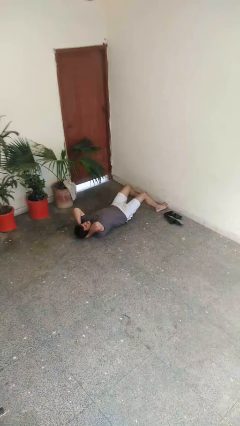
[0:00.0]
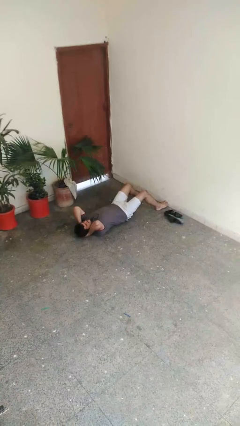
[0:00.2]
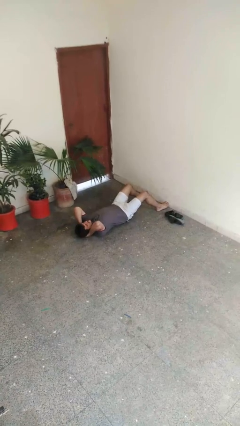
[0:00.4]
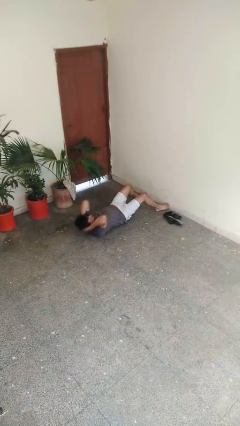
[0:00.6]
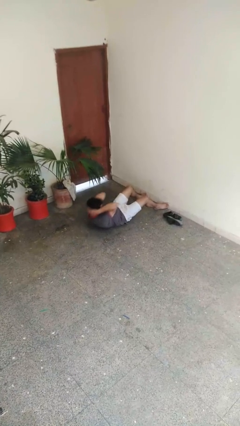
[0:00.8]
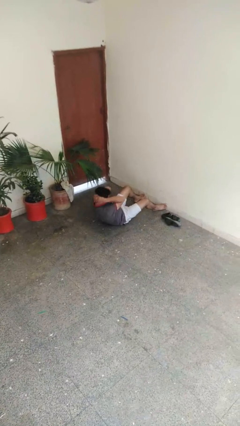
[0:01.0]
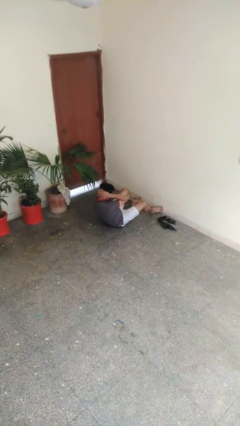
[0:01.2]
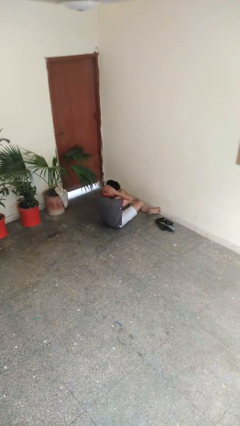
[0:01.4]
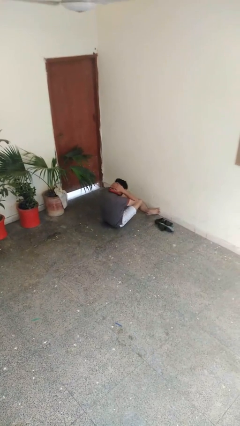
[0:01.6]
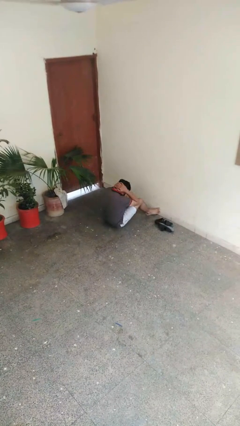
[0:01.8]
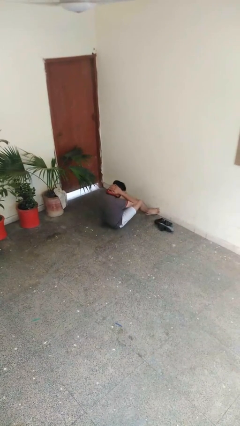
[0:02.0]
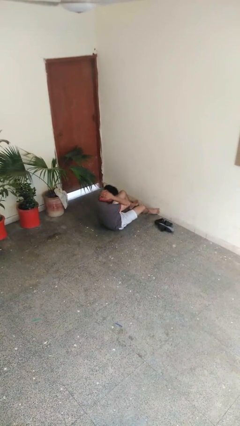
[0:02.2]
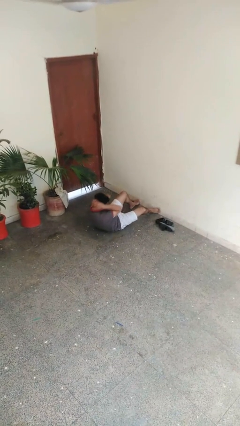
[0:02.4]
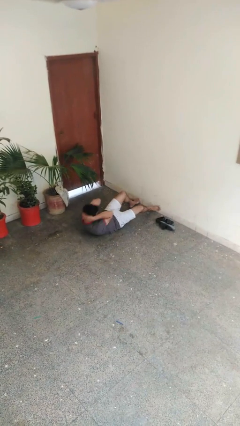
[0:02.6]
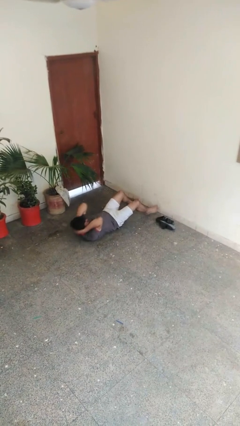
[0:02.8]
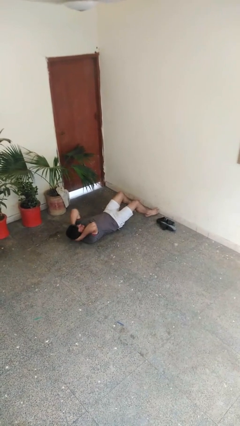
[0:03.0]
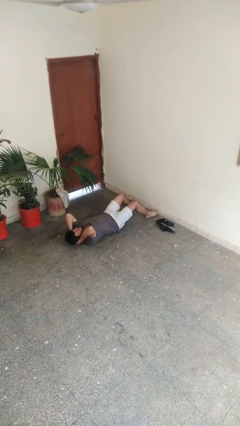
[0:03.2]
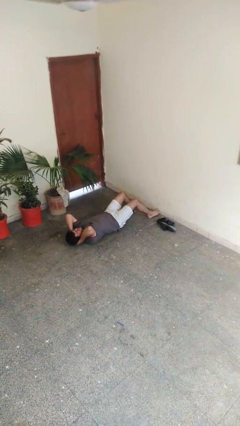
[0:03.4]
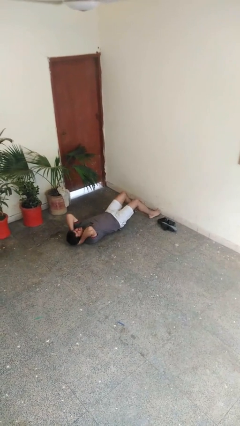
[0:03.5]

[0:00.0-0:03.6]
person exercises with situp

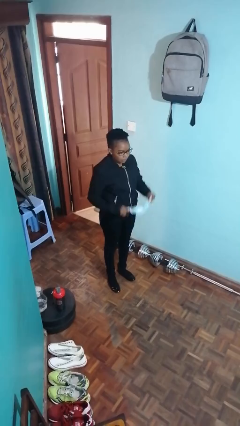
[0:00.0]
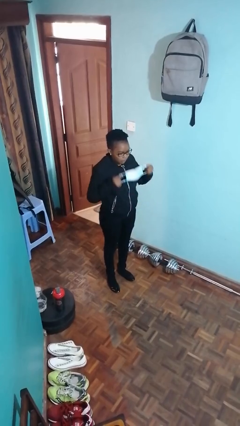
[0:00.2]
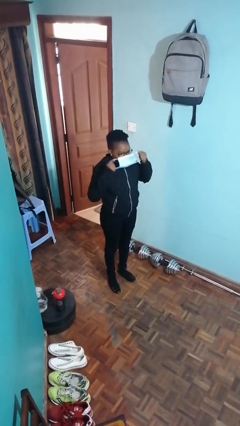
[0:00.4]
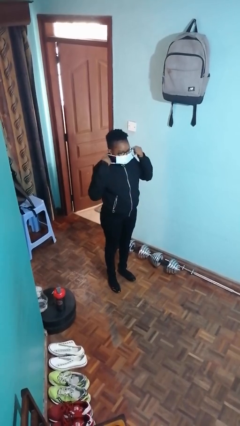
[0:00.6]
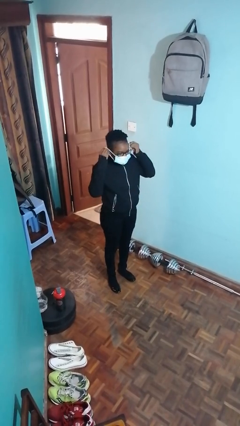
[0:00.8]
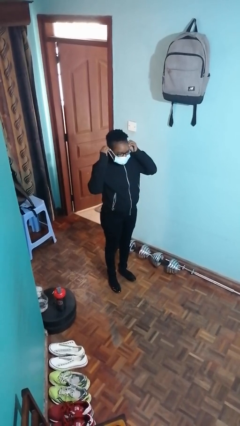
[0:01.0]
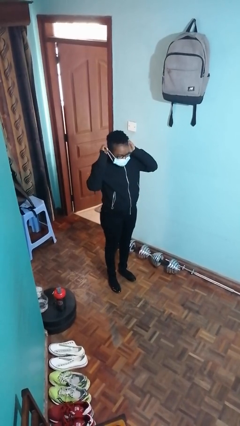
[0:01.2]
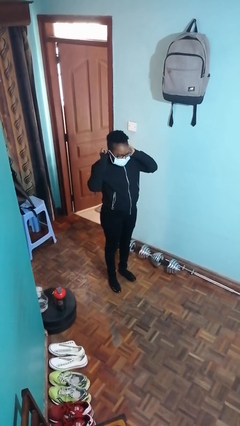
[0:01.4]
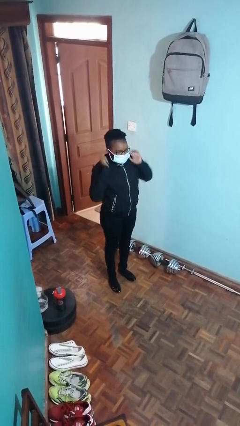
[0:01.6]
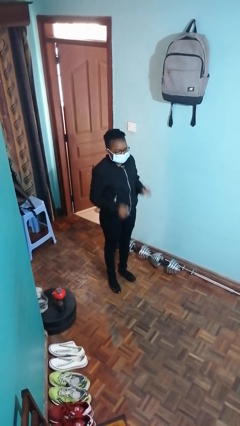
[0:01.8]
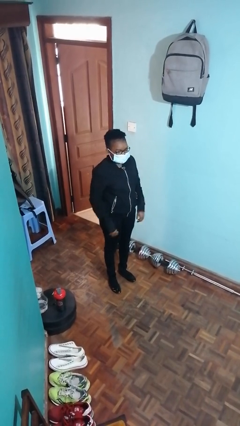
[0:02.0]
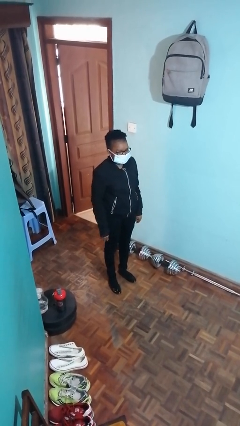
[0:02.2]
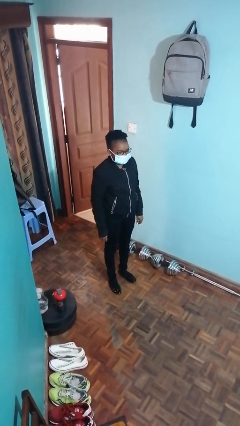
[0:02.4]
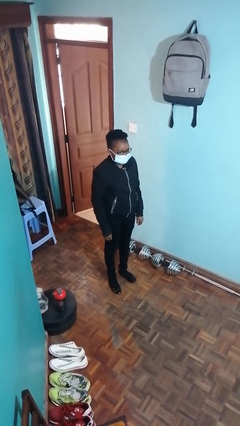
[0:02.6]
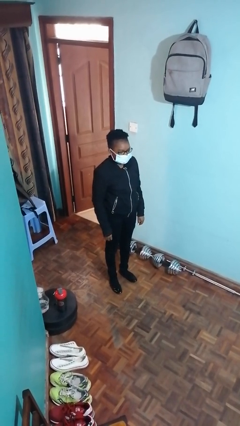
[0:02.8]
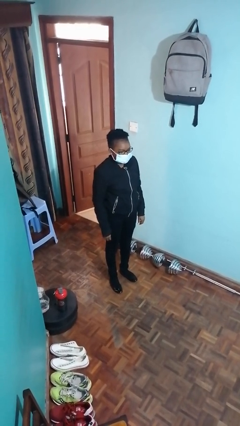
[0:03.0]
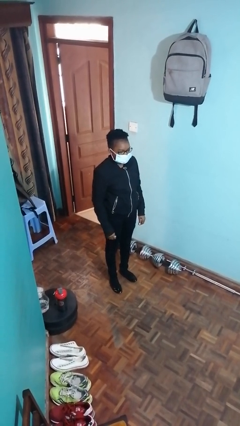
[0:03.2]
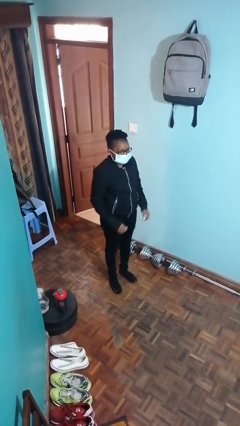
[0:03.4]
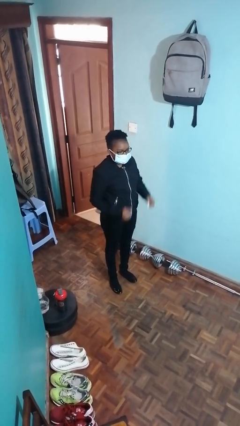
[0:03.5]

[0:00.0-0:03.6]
person puts on facemask

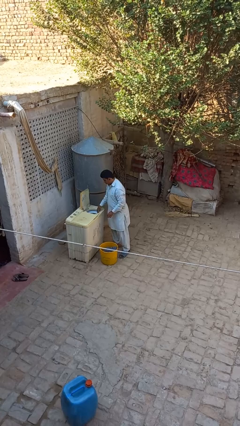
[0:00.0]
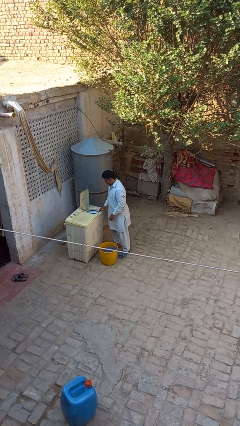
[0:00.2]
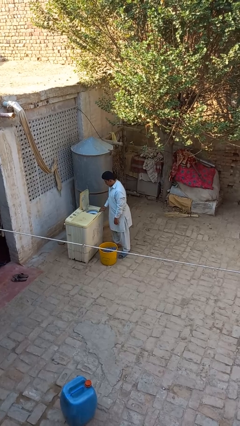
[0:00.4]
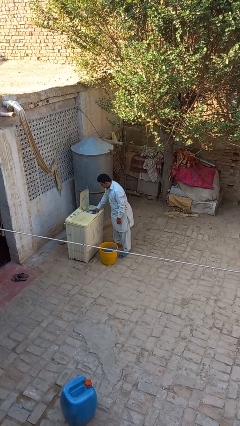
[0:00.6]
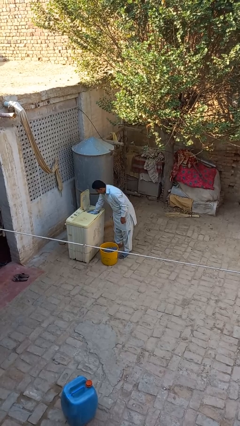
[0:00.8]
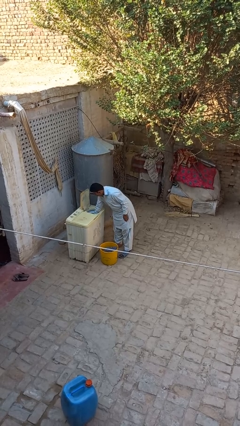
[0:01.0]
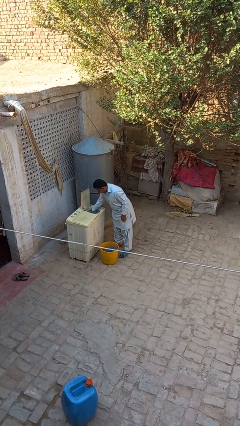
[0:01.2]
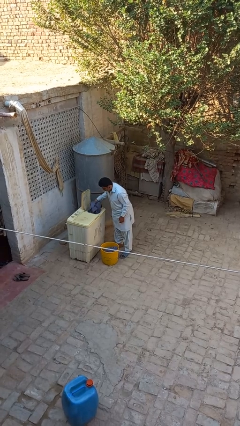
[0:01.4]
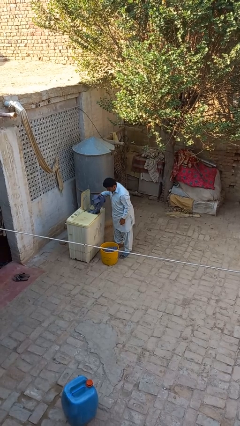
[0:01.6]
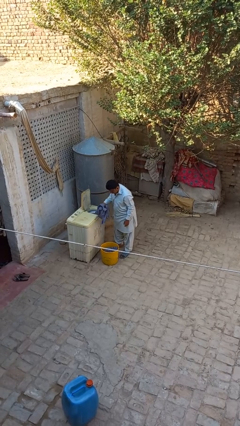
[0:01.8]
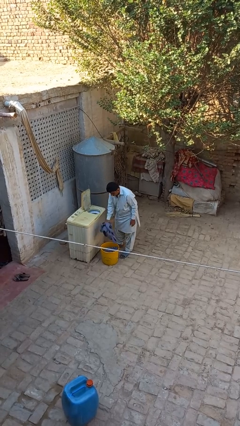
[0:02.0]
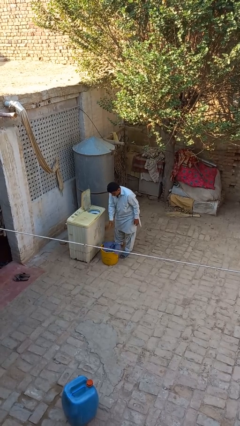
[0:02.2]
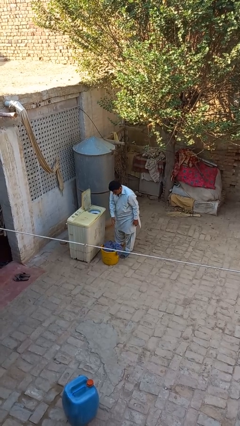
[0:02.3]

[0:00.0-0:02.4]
person unloads dryer

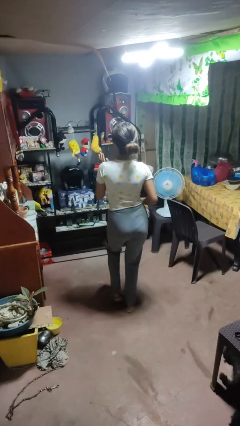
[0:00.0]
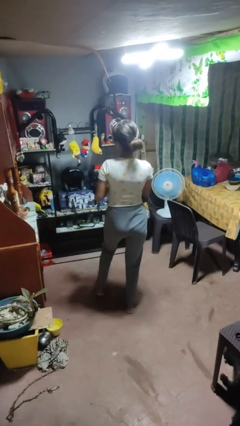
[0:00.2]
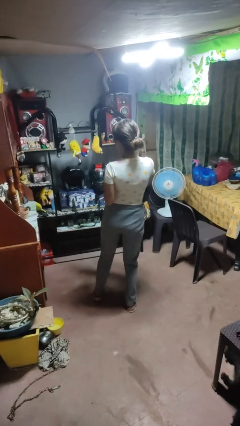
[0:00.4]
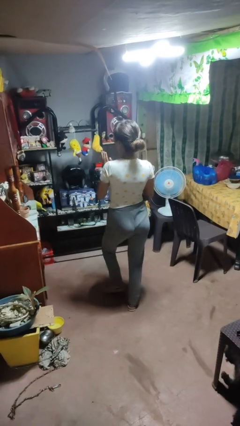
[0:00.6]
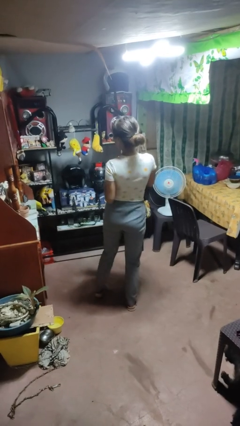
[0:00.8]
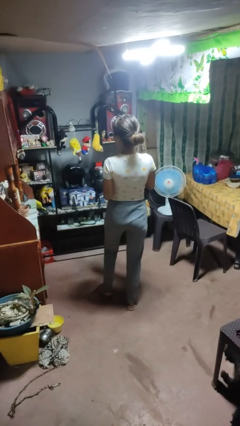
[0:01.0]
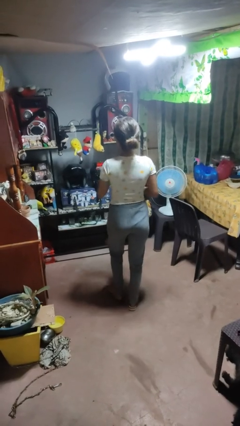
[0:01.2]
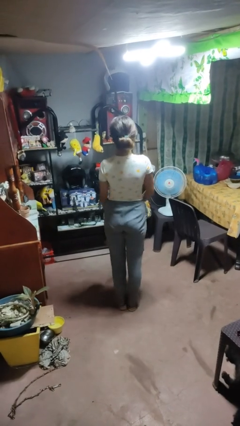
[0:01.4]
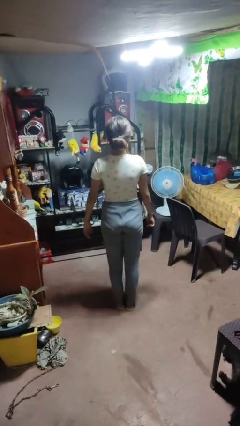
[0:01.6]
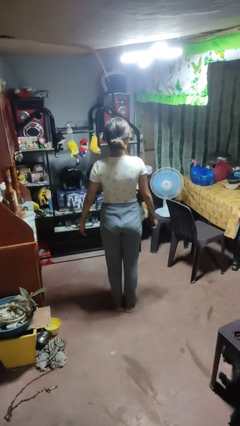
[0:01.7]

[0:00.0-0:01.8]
person dances in place

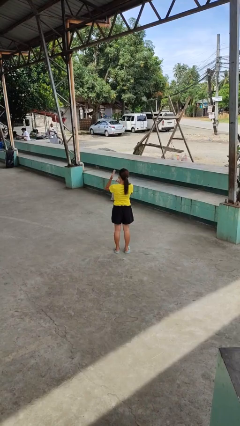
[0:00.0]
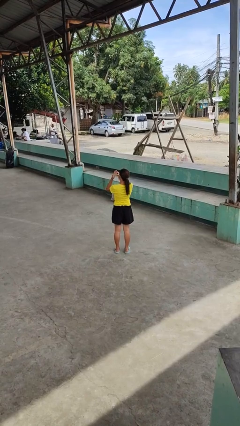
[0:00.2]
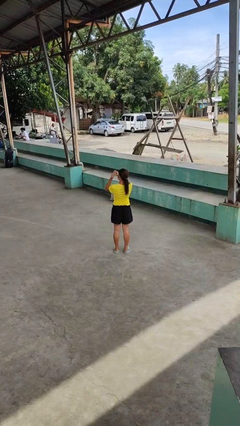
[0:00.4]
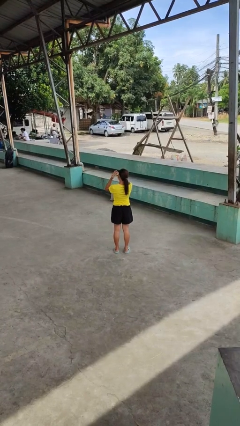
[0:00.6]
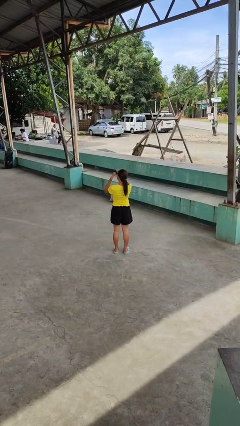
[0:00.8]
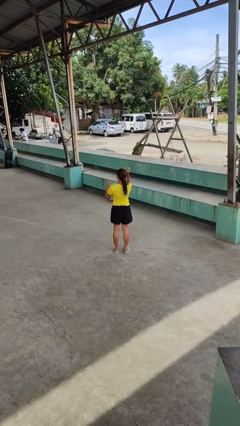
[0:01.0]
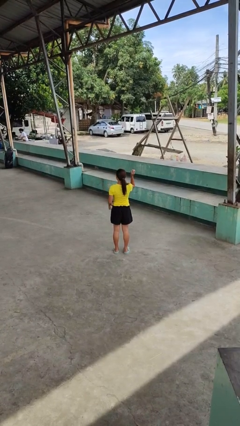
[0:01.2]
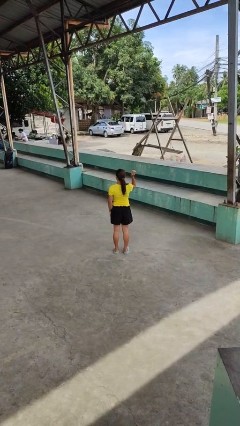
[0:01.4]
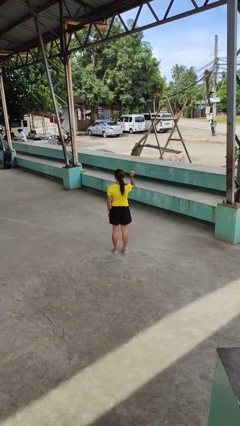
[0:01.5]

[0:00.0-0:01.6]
person takes off ring

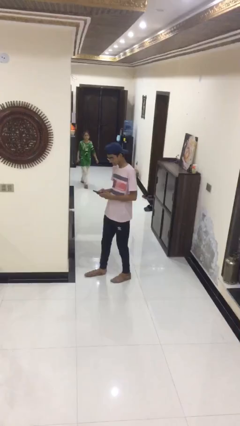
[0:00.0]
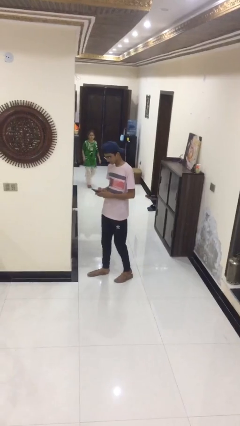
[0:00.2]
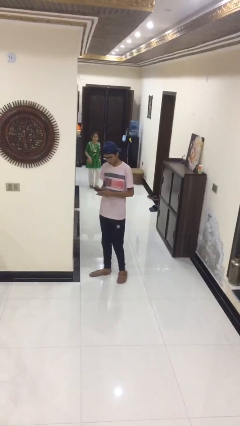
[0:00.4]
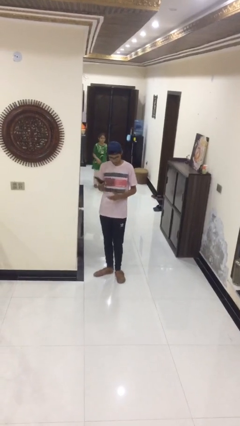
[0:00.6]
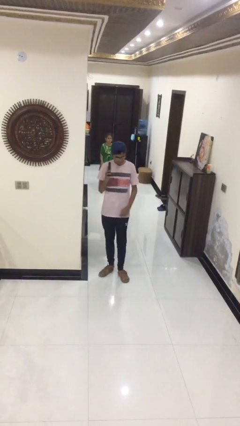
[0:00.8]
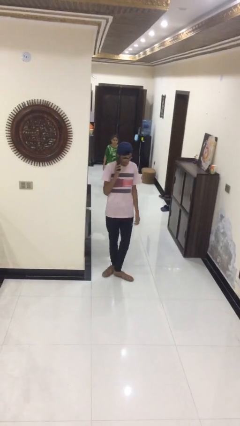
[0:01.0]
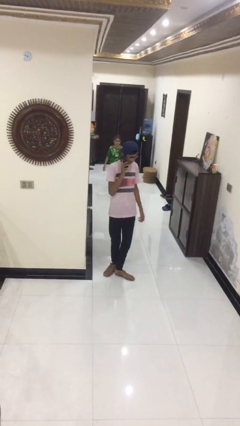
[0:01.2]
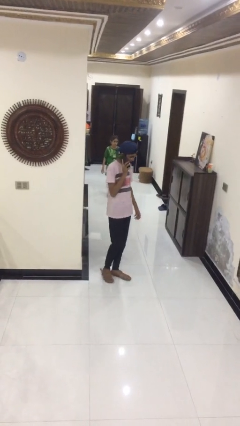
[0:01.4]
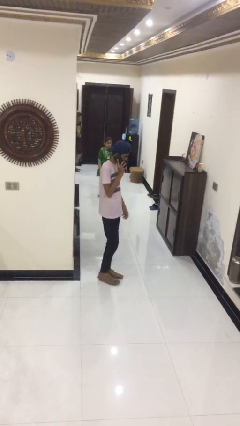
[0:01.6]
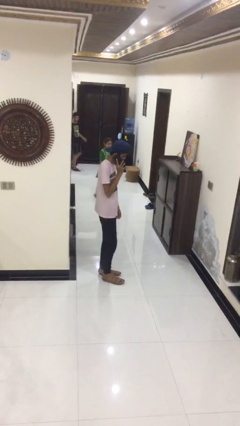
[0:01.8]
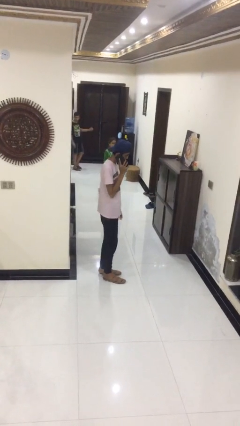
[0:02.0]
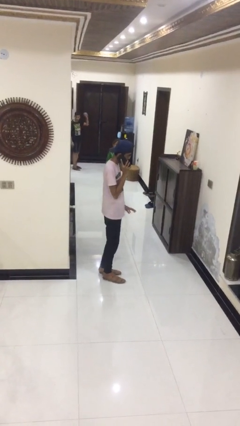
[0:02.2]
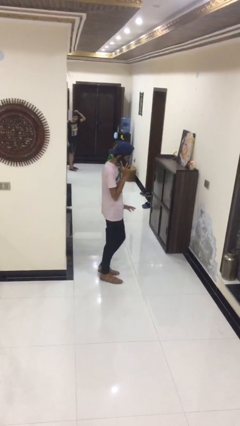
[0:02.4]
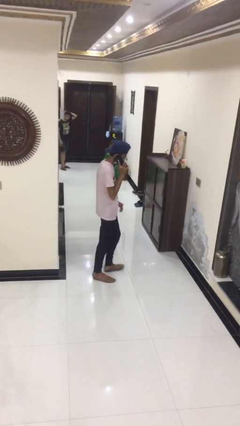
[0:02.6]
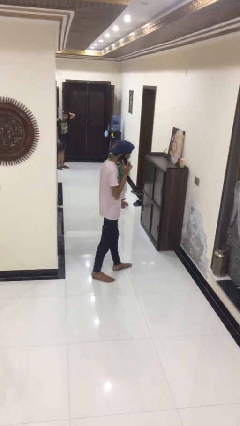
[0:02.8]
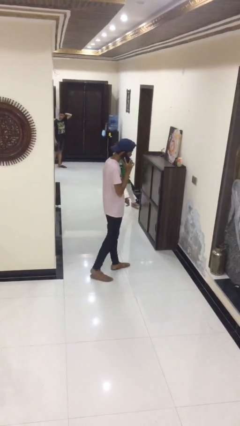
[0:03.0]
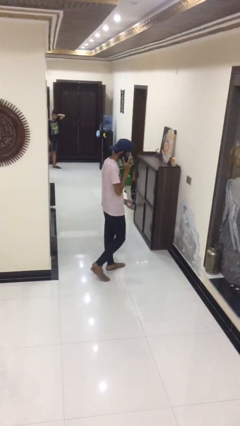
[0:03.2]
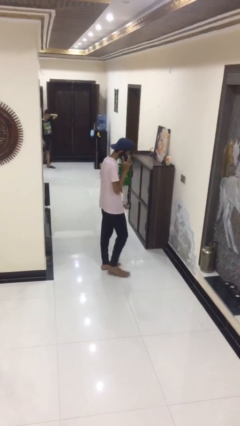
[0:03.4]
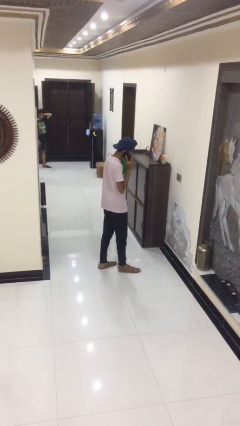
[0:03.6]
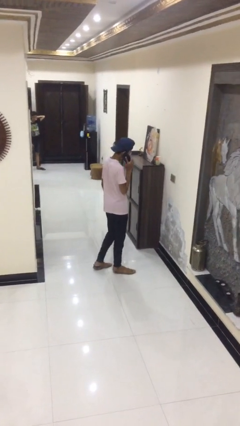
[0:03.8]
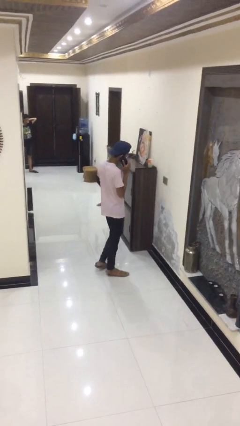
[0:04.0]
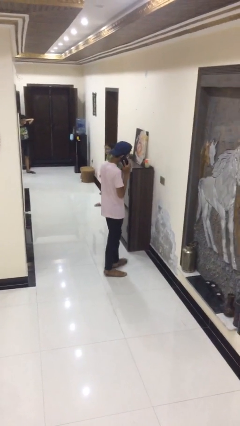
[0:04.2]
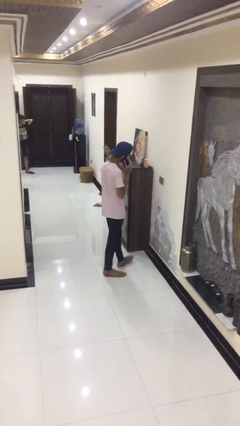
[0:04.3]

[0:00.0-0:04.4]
person talks on phone
